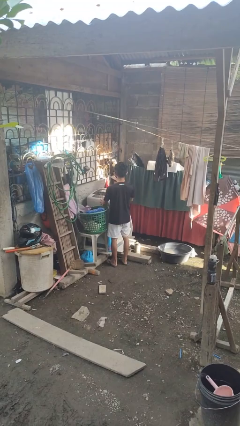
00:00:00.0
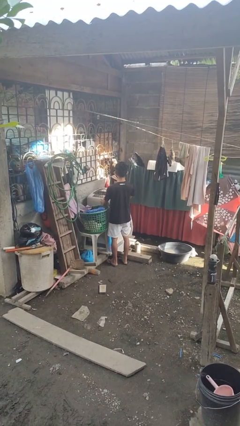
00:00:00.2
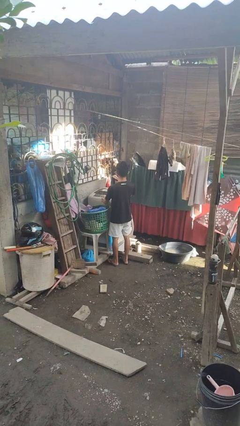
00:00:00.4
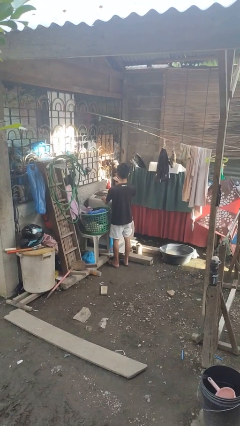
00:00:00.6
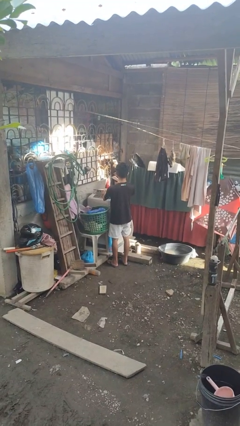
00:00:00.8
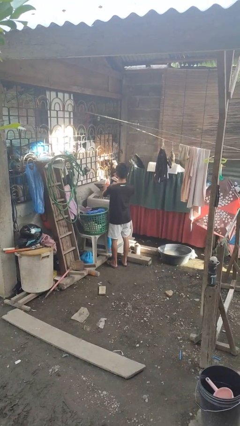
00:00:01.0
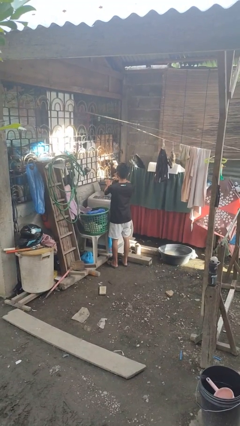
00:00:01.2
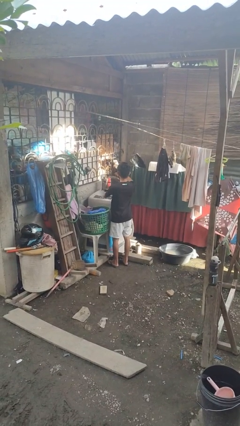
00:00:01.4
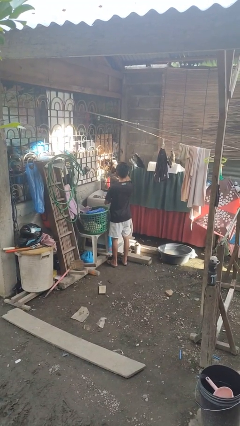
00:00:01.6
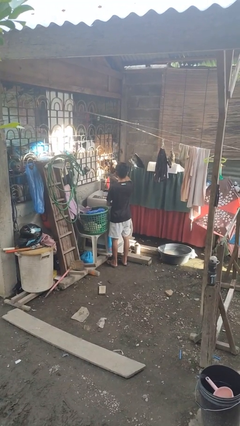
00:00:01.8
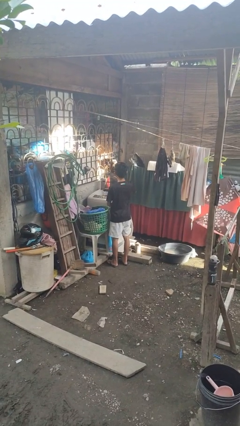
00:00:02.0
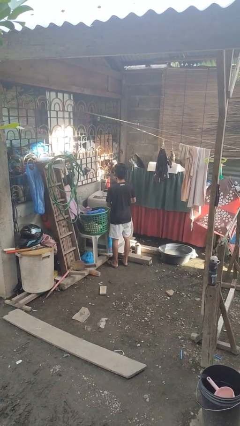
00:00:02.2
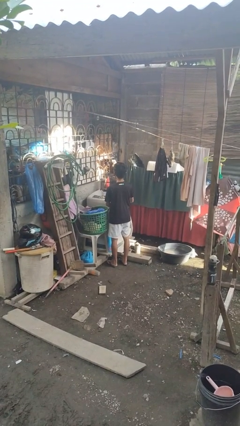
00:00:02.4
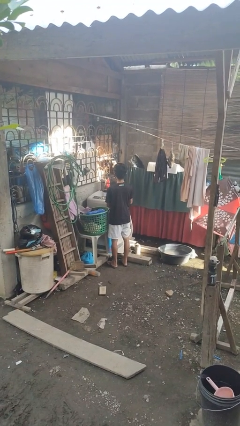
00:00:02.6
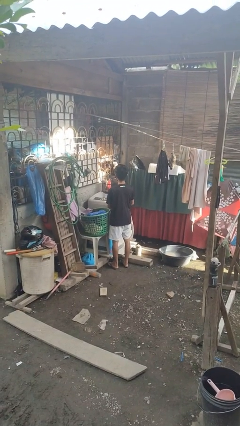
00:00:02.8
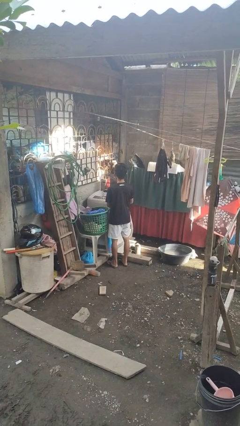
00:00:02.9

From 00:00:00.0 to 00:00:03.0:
person opens clothes washer

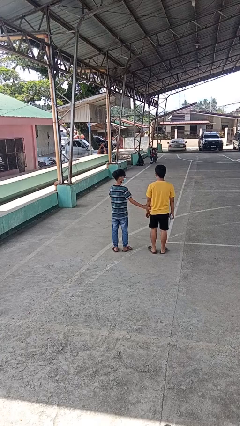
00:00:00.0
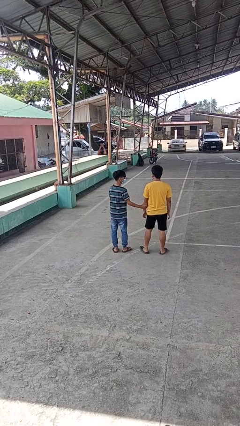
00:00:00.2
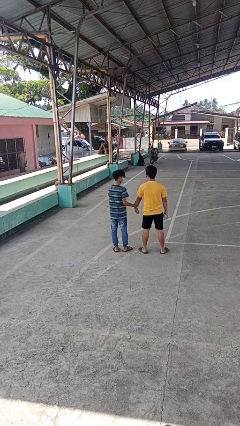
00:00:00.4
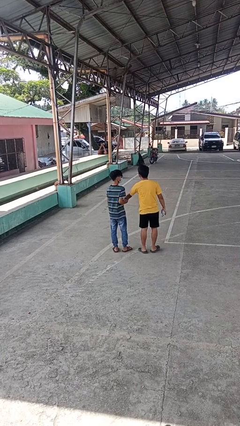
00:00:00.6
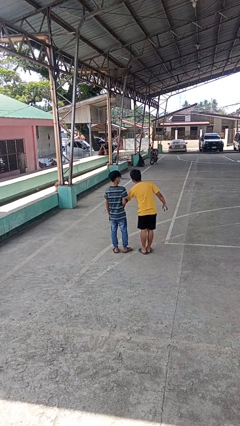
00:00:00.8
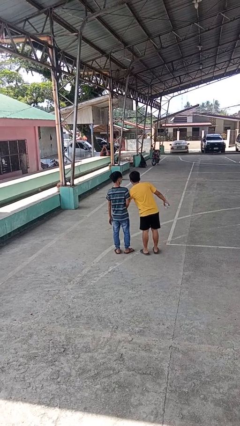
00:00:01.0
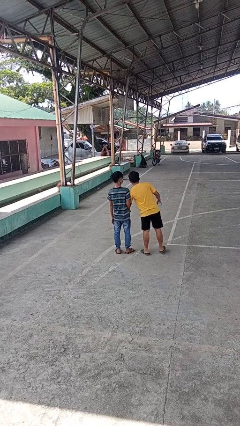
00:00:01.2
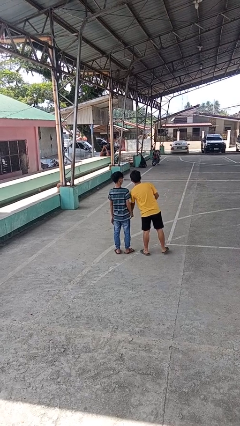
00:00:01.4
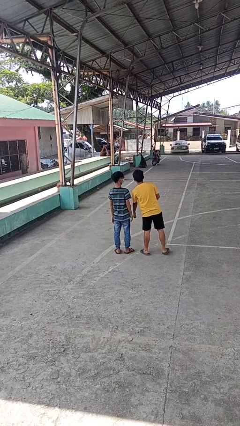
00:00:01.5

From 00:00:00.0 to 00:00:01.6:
person grabs person by forearm

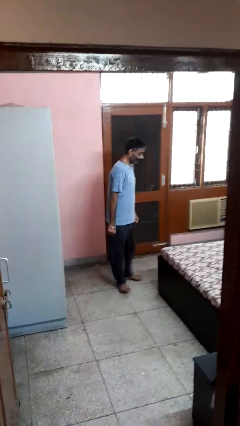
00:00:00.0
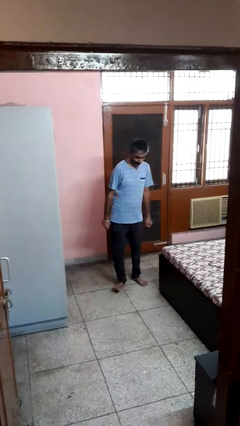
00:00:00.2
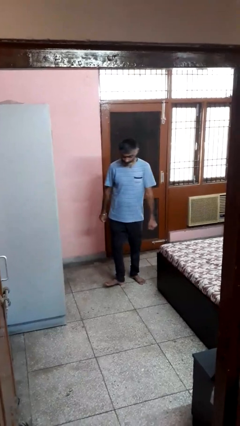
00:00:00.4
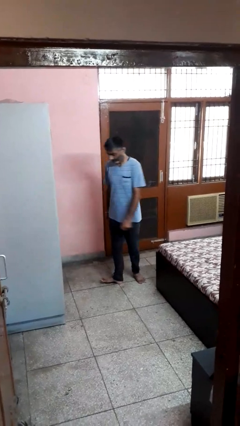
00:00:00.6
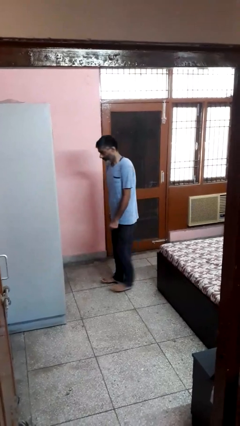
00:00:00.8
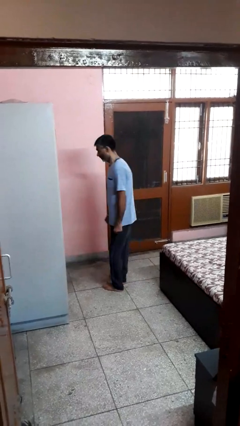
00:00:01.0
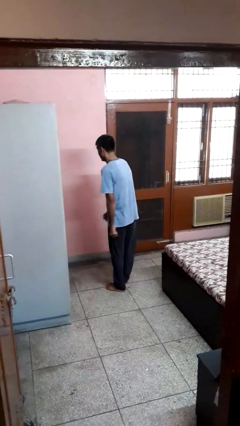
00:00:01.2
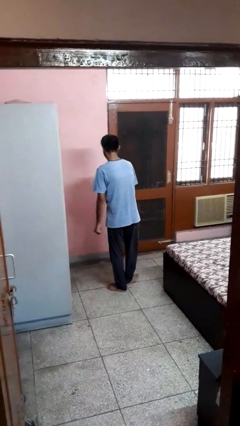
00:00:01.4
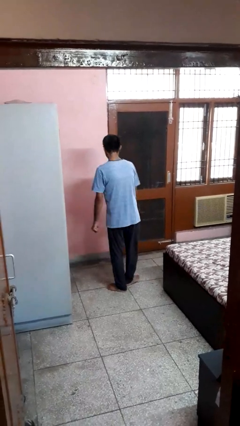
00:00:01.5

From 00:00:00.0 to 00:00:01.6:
person twirls

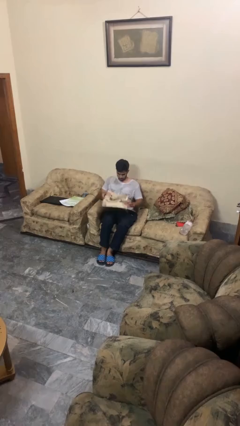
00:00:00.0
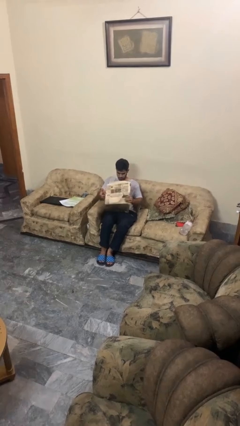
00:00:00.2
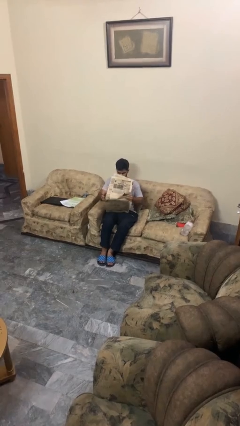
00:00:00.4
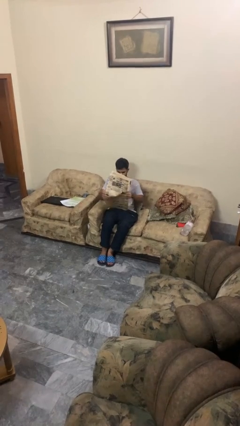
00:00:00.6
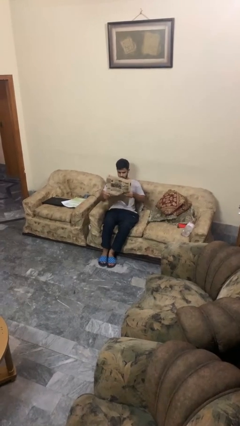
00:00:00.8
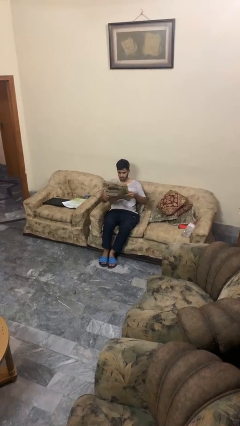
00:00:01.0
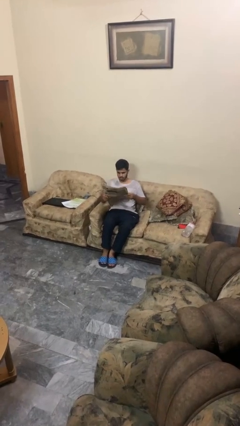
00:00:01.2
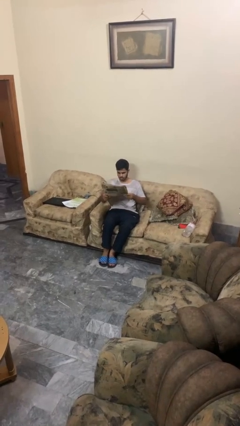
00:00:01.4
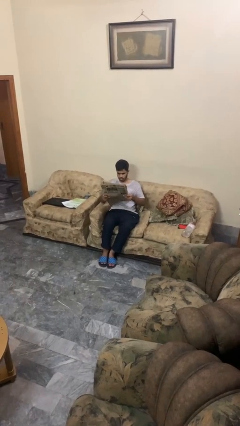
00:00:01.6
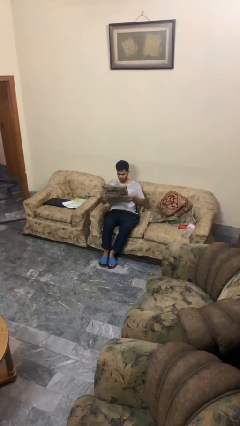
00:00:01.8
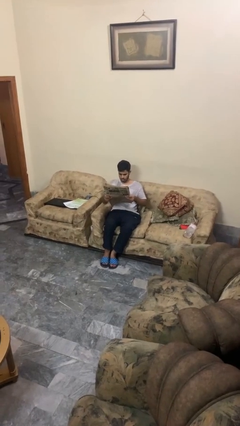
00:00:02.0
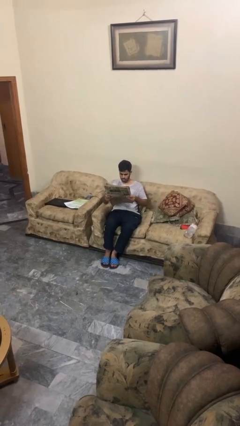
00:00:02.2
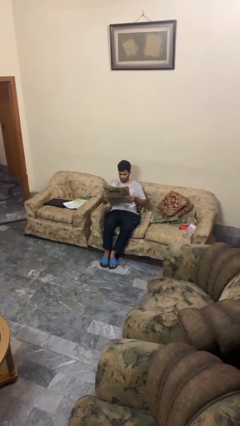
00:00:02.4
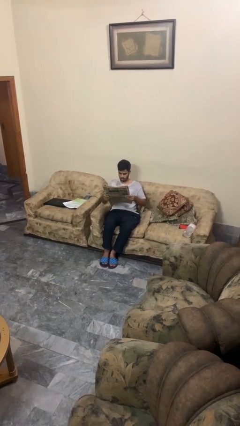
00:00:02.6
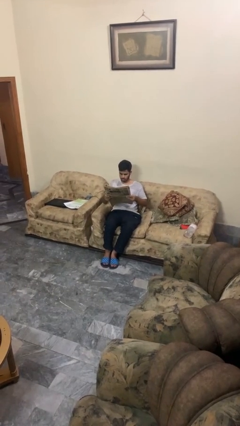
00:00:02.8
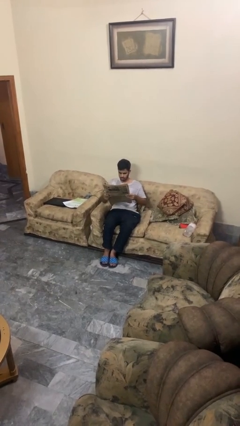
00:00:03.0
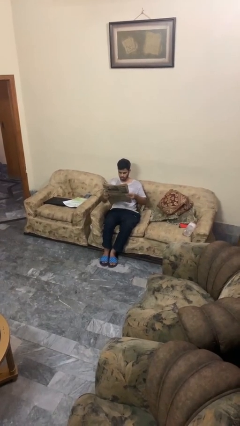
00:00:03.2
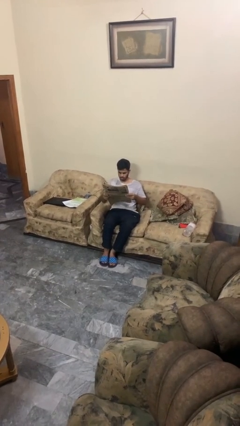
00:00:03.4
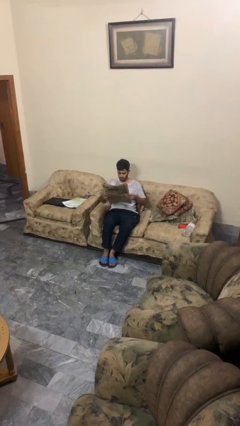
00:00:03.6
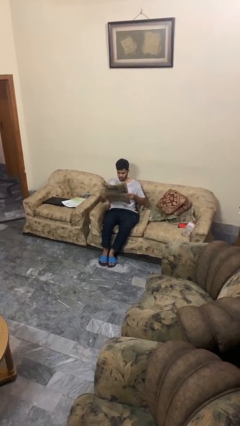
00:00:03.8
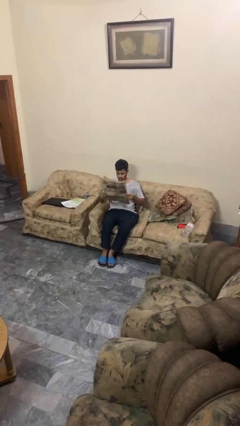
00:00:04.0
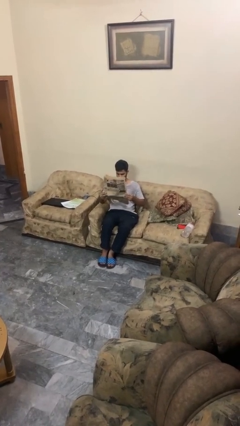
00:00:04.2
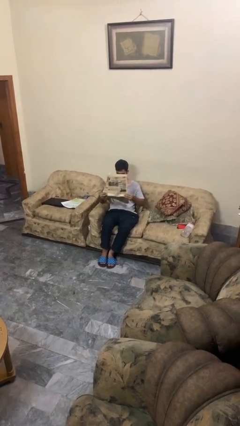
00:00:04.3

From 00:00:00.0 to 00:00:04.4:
person reads newspaper

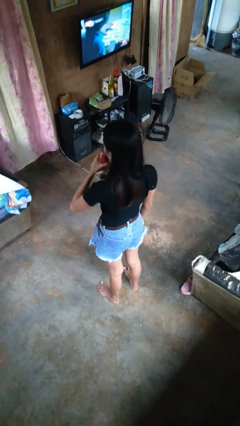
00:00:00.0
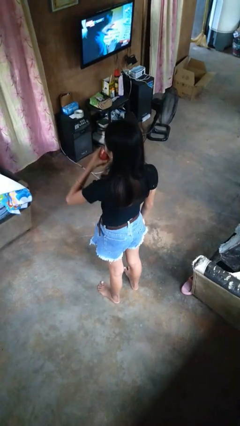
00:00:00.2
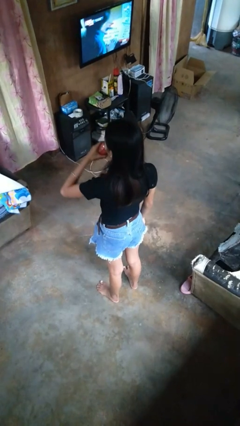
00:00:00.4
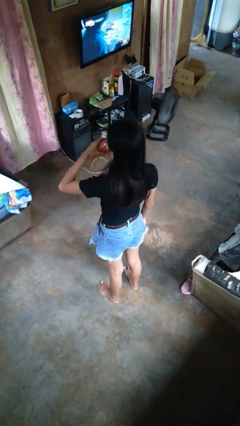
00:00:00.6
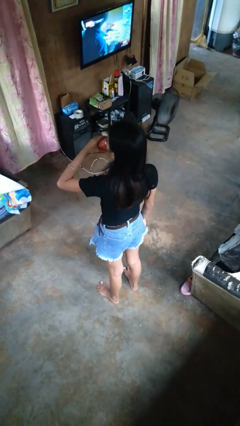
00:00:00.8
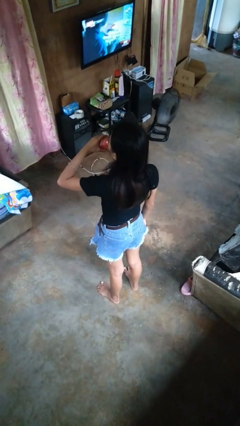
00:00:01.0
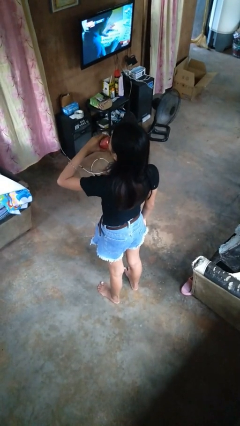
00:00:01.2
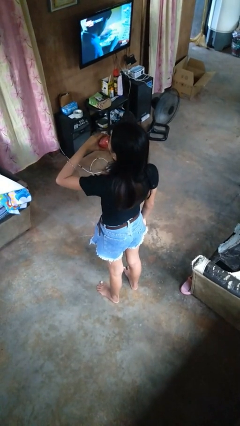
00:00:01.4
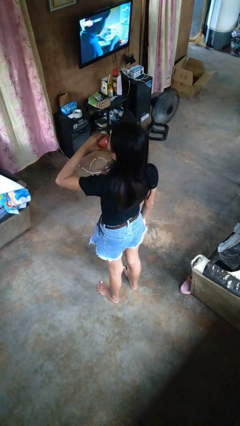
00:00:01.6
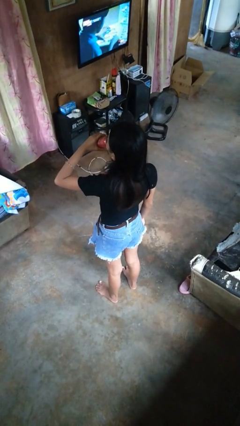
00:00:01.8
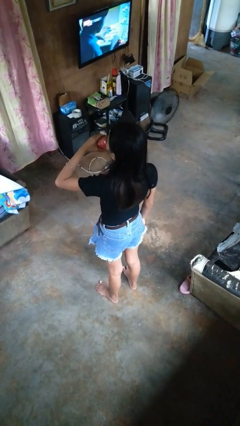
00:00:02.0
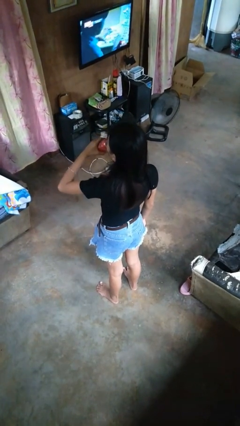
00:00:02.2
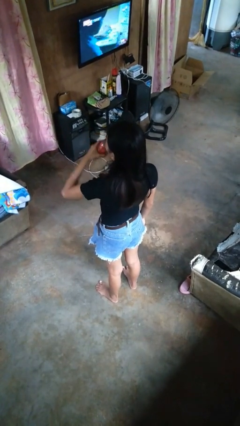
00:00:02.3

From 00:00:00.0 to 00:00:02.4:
person drinks from beverage can

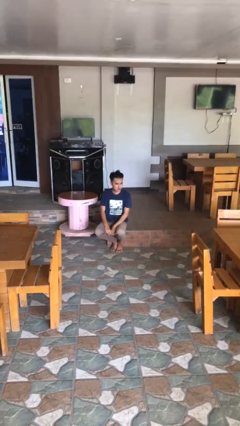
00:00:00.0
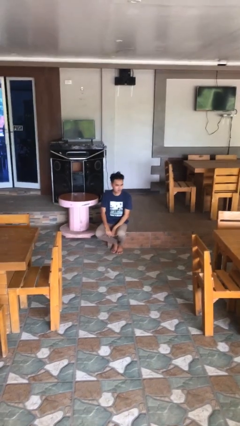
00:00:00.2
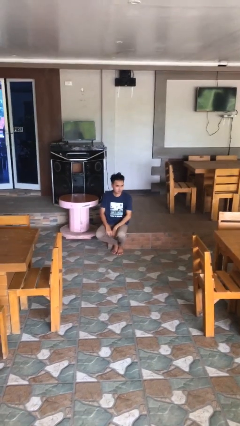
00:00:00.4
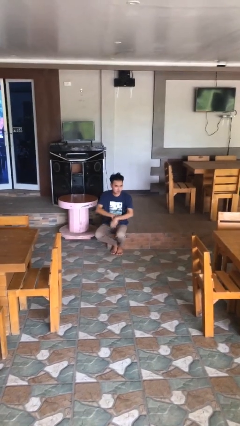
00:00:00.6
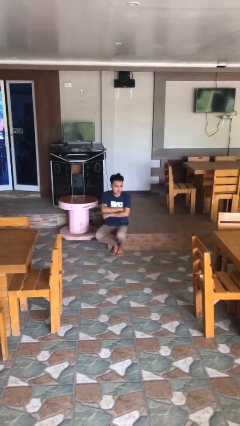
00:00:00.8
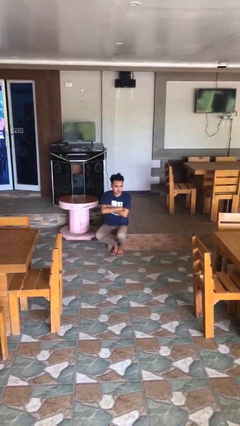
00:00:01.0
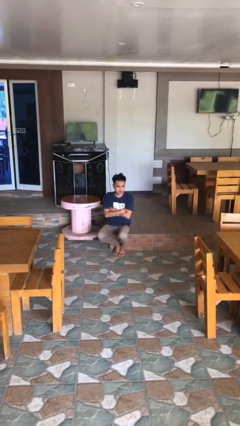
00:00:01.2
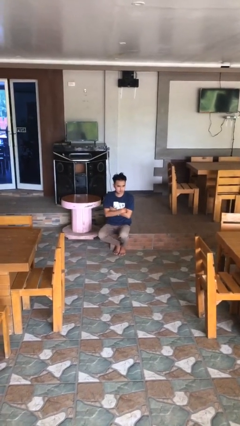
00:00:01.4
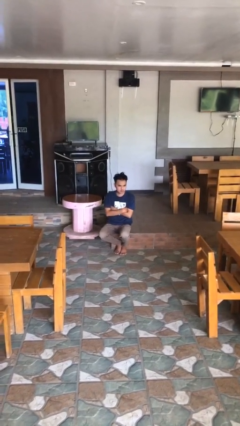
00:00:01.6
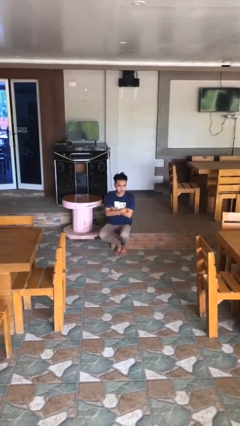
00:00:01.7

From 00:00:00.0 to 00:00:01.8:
person crosses arms

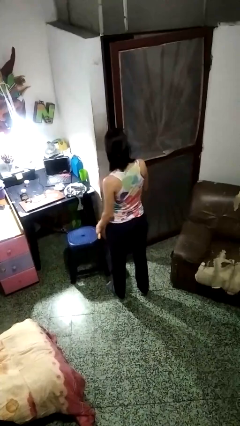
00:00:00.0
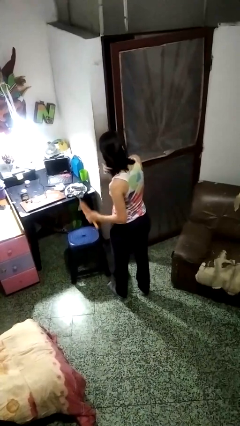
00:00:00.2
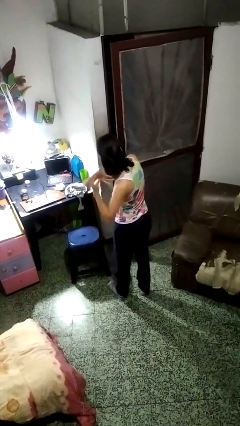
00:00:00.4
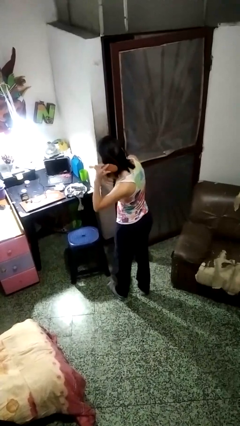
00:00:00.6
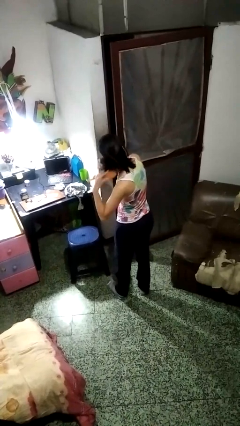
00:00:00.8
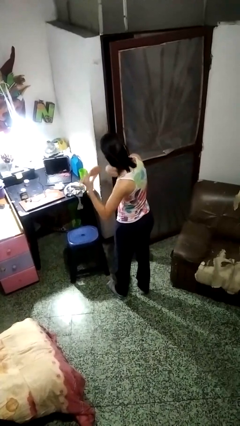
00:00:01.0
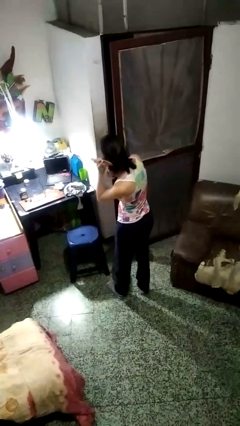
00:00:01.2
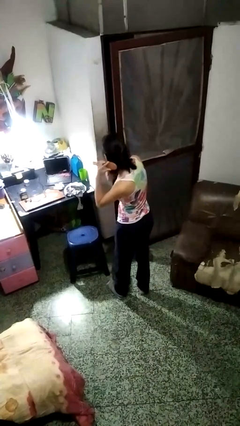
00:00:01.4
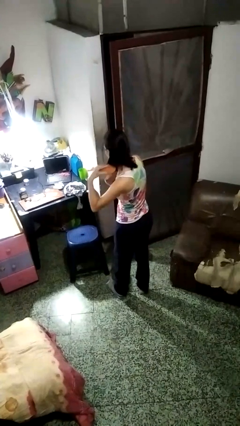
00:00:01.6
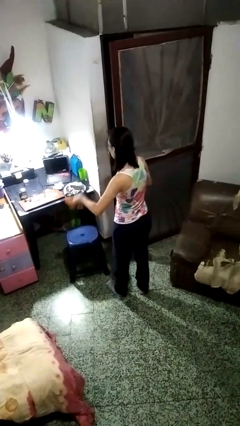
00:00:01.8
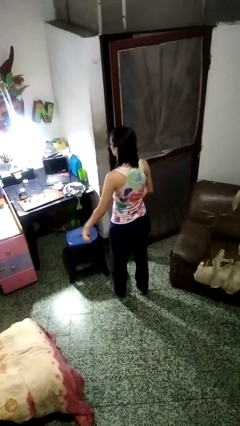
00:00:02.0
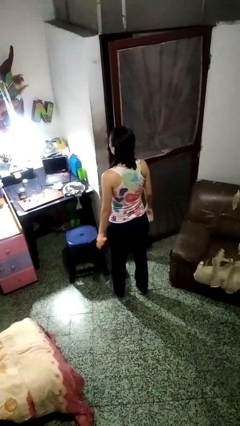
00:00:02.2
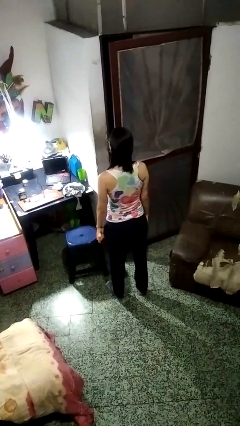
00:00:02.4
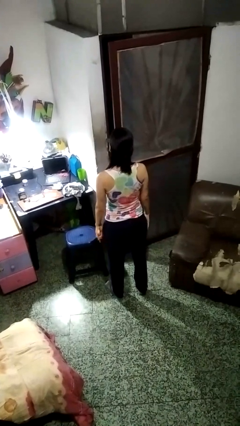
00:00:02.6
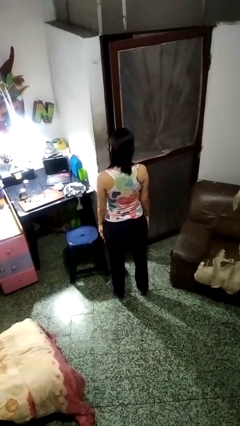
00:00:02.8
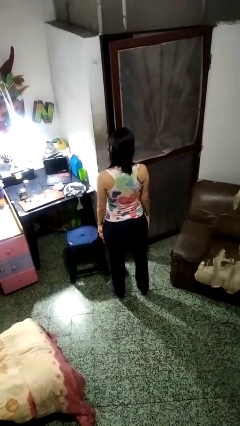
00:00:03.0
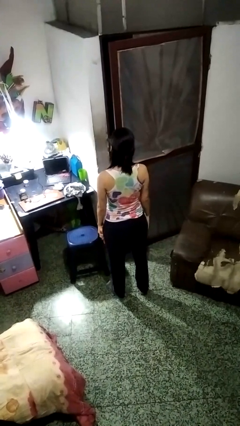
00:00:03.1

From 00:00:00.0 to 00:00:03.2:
person brushes hair
